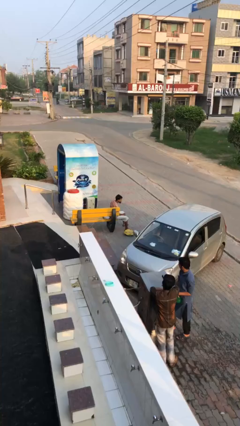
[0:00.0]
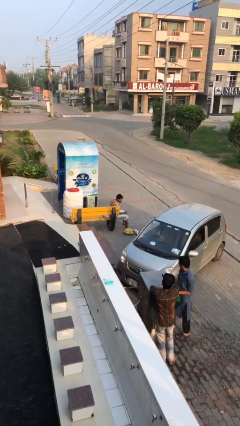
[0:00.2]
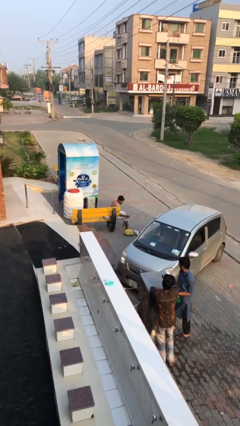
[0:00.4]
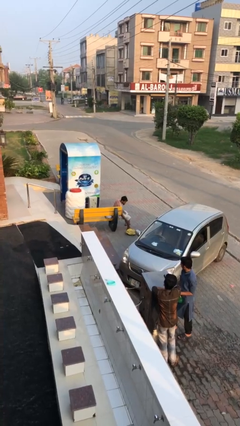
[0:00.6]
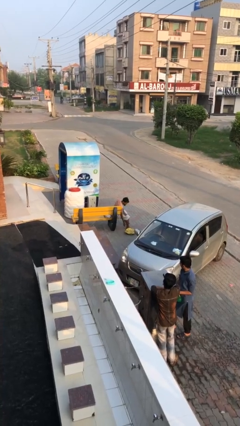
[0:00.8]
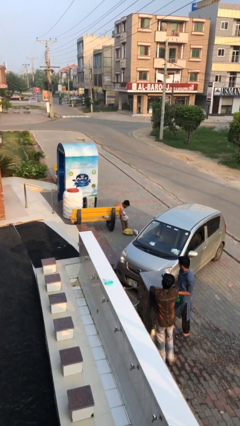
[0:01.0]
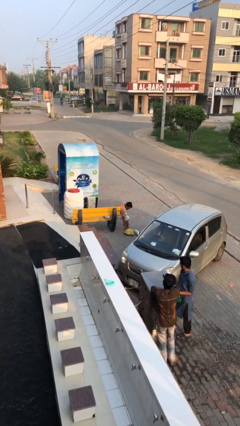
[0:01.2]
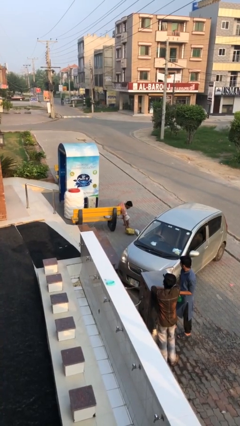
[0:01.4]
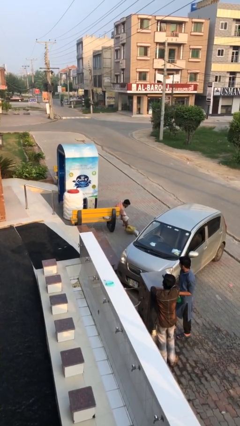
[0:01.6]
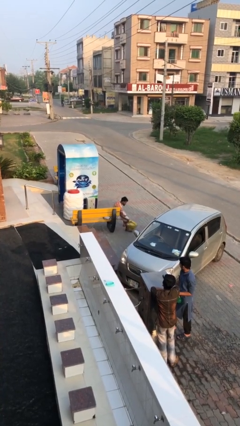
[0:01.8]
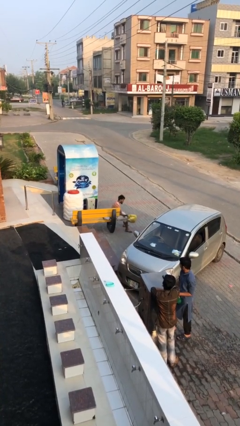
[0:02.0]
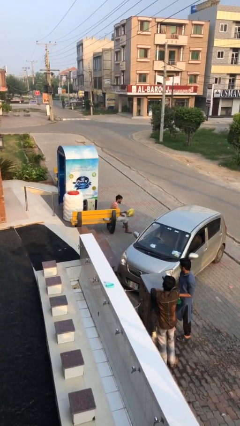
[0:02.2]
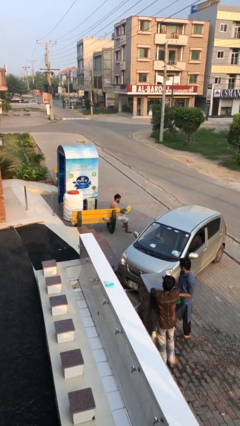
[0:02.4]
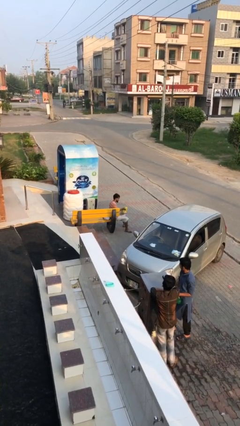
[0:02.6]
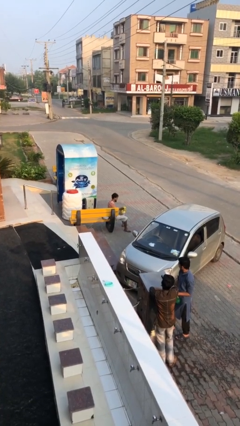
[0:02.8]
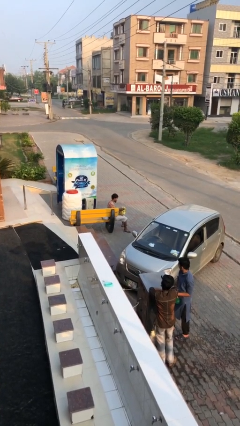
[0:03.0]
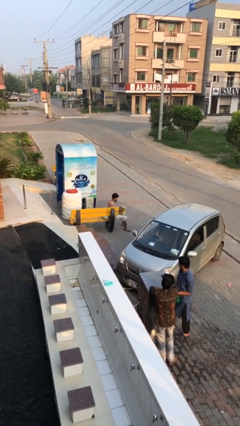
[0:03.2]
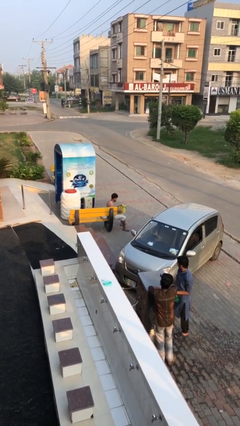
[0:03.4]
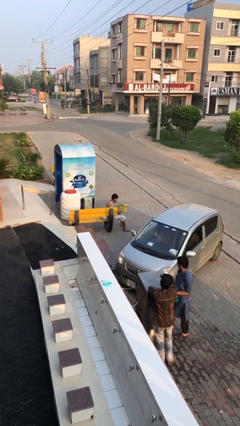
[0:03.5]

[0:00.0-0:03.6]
person picks up object from floor

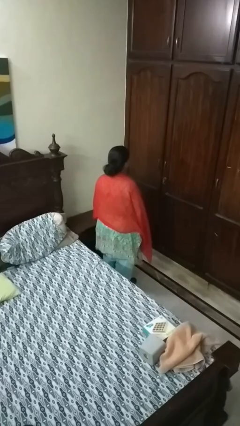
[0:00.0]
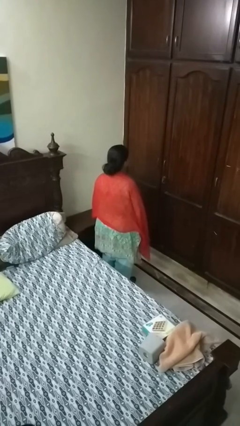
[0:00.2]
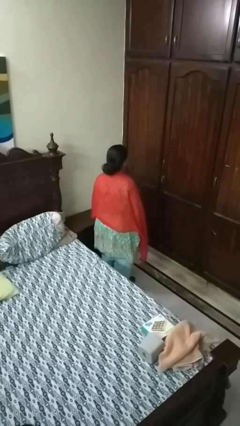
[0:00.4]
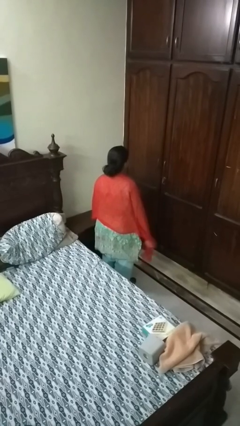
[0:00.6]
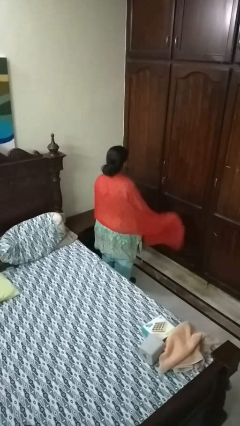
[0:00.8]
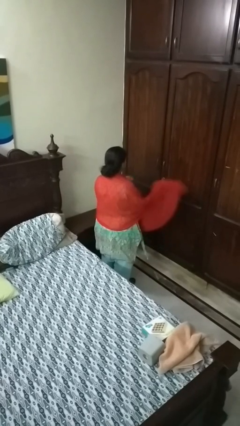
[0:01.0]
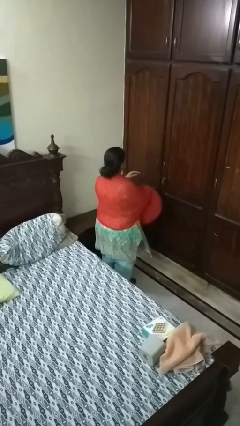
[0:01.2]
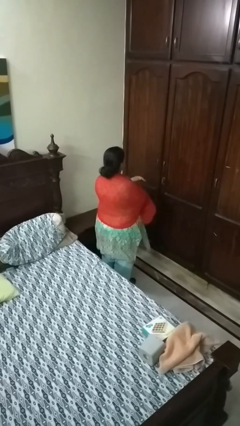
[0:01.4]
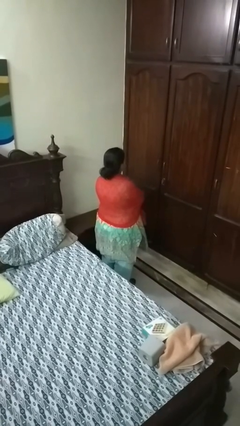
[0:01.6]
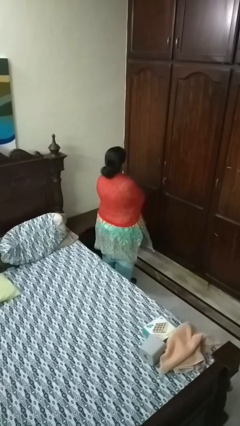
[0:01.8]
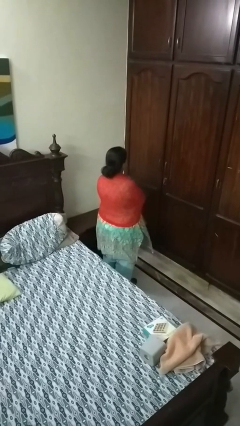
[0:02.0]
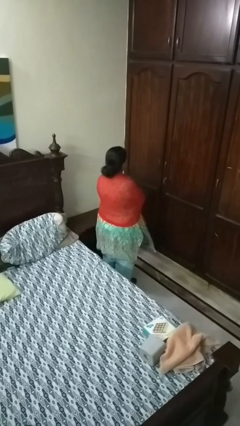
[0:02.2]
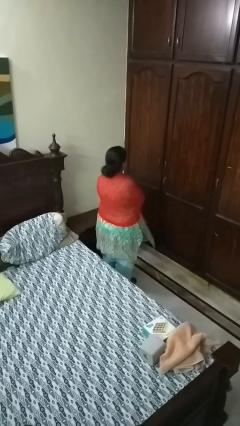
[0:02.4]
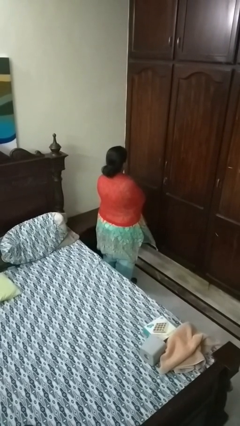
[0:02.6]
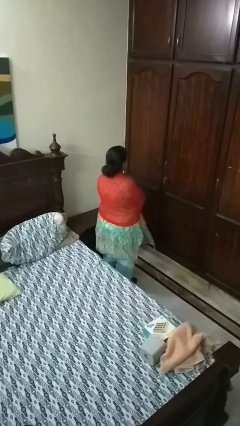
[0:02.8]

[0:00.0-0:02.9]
person crosses arms

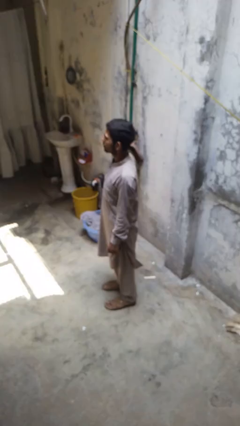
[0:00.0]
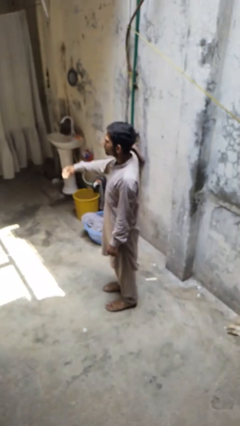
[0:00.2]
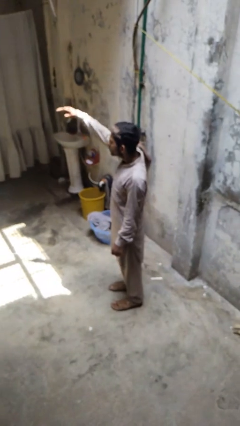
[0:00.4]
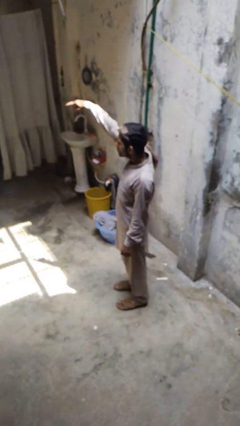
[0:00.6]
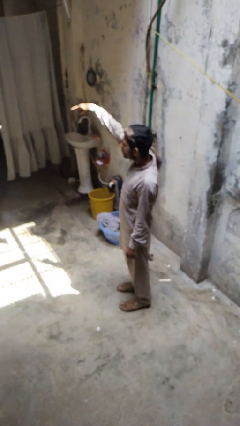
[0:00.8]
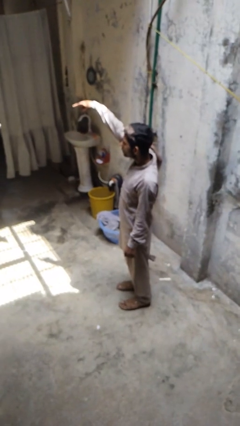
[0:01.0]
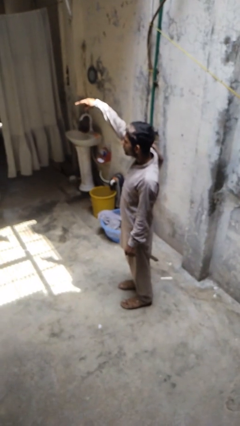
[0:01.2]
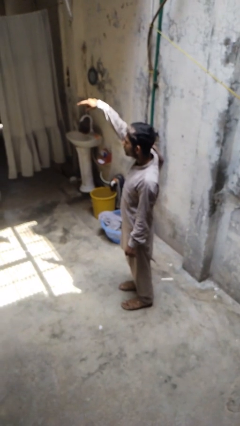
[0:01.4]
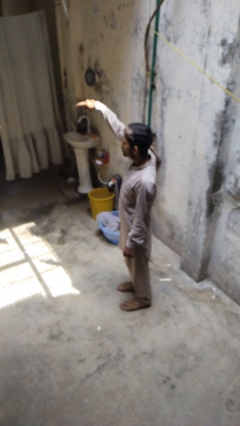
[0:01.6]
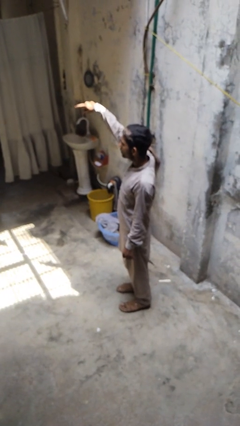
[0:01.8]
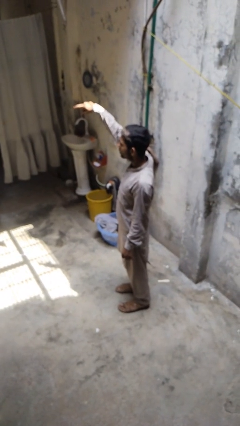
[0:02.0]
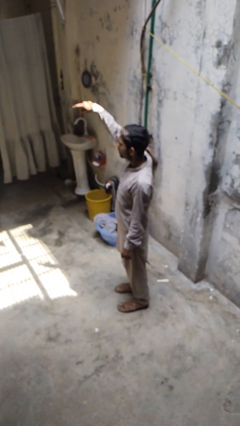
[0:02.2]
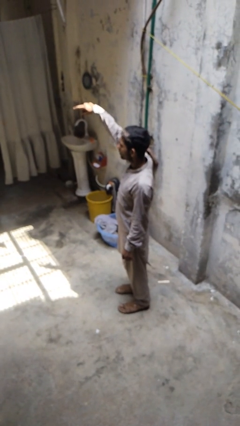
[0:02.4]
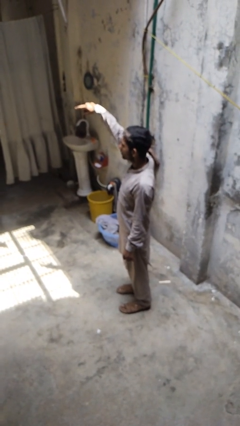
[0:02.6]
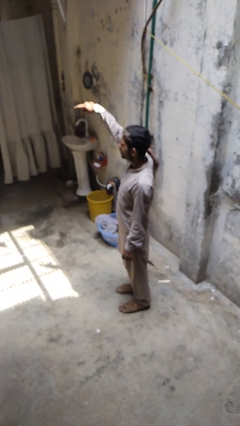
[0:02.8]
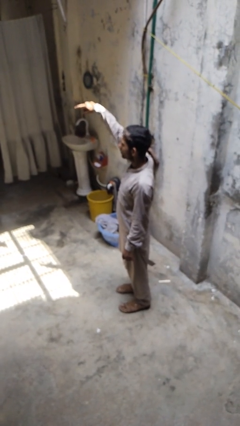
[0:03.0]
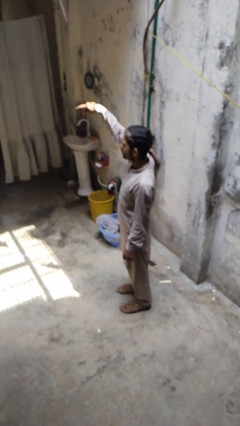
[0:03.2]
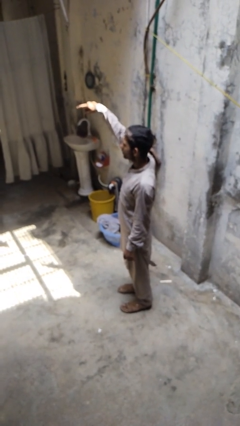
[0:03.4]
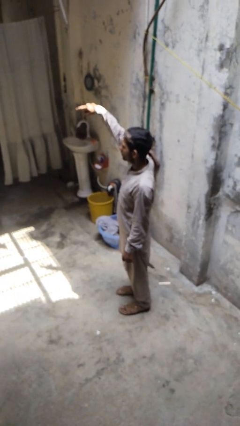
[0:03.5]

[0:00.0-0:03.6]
person points at person

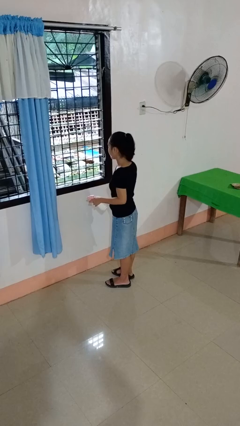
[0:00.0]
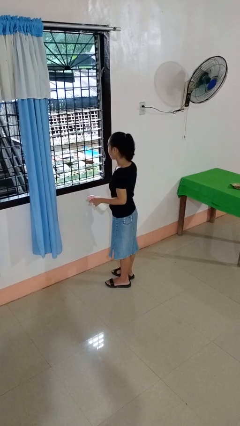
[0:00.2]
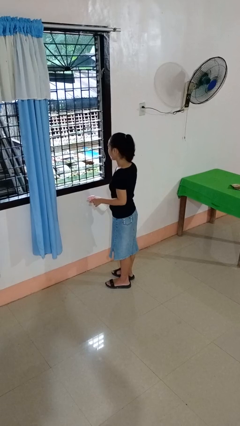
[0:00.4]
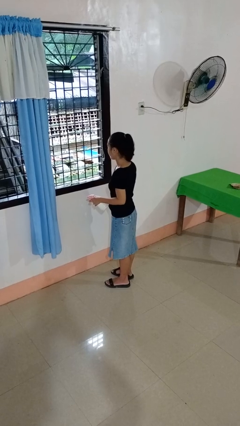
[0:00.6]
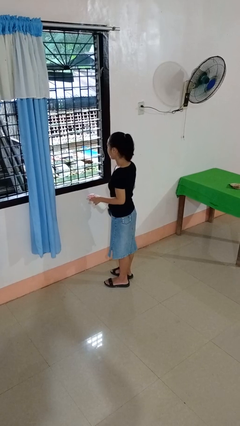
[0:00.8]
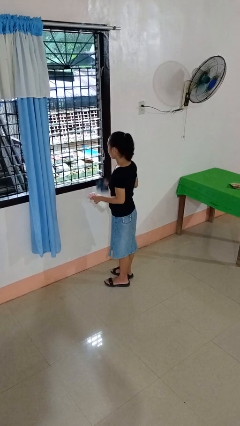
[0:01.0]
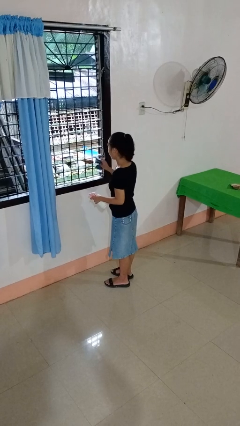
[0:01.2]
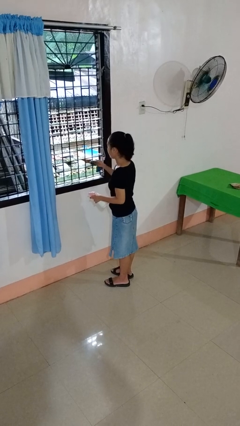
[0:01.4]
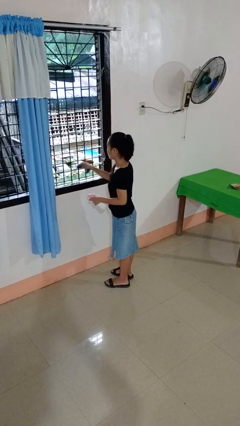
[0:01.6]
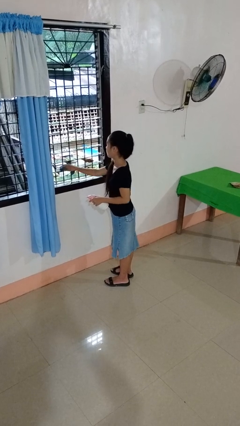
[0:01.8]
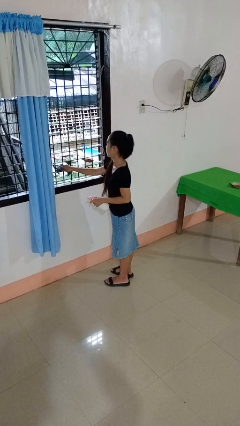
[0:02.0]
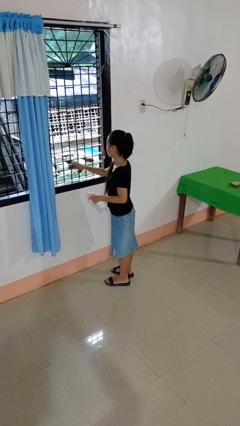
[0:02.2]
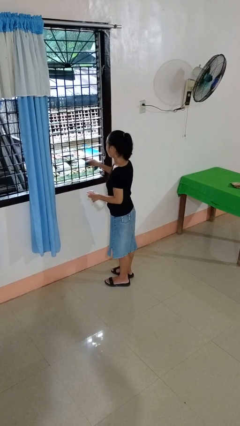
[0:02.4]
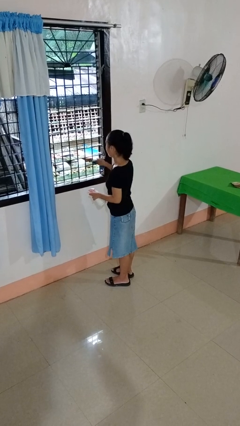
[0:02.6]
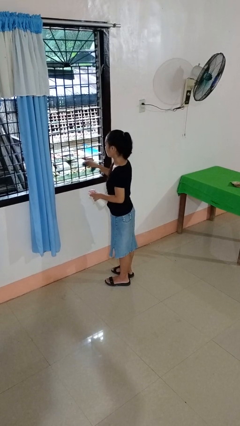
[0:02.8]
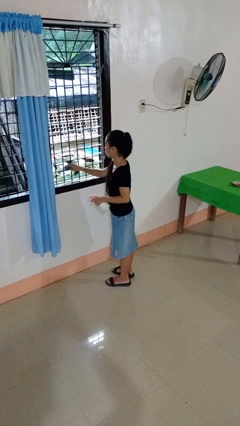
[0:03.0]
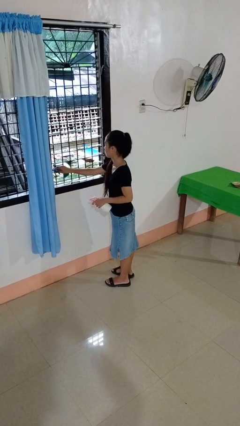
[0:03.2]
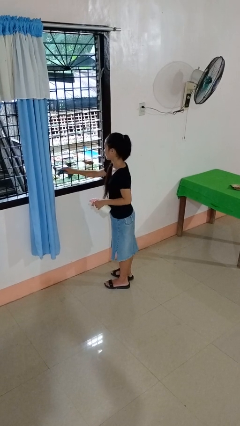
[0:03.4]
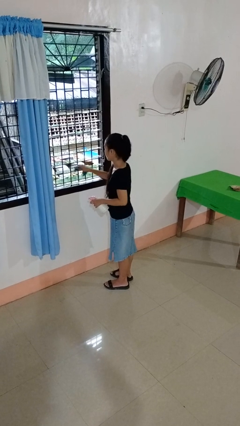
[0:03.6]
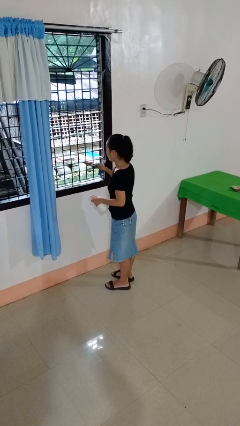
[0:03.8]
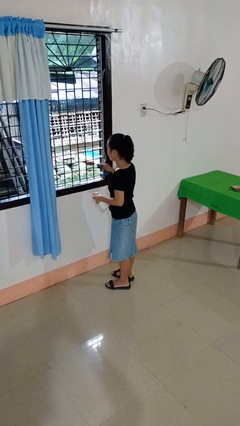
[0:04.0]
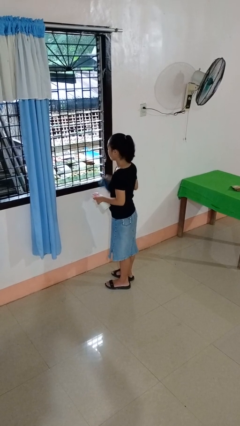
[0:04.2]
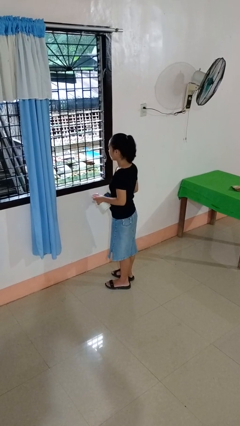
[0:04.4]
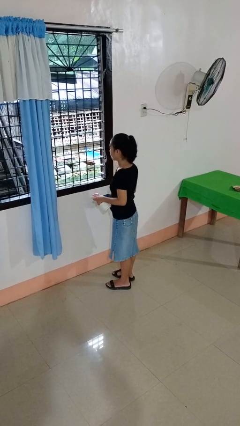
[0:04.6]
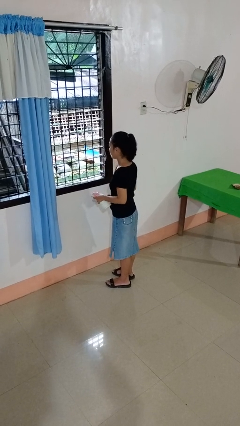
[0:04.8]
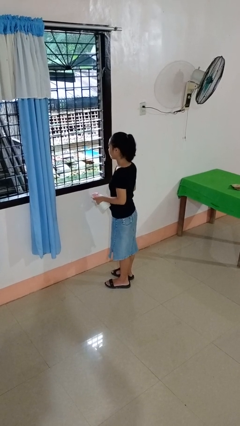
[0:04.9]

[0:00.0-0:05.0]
person washes window

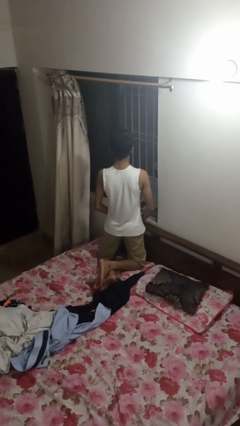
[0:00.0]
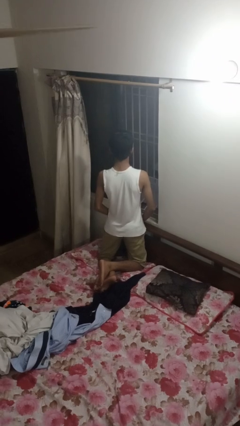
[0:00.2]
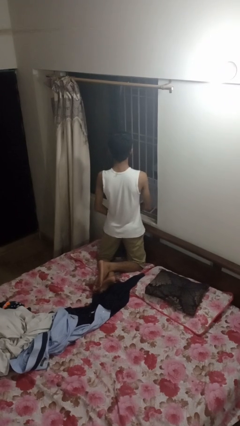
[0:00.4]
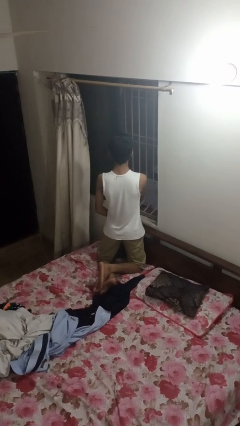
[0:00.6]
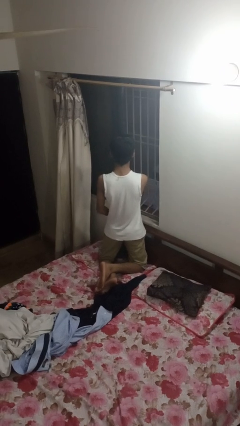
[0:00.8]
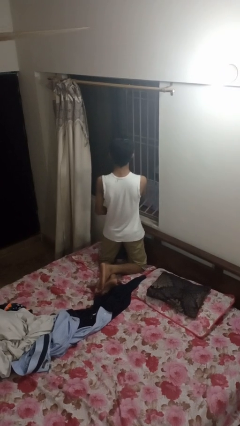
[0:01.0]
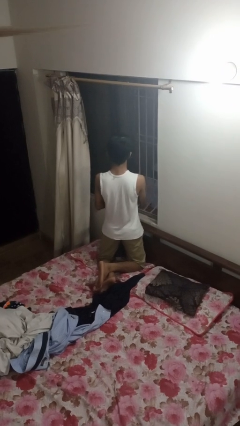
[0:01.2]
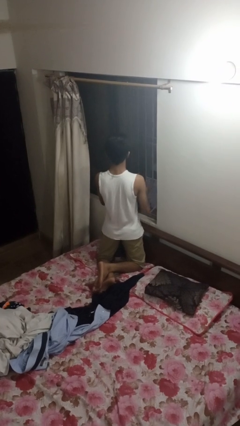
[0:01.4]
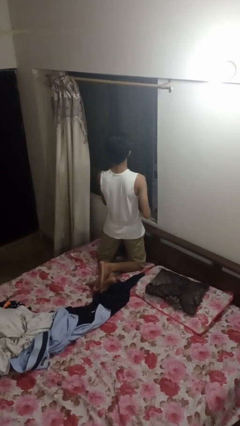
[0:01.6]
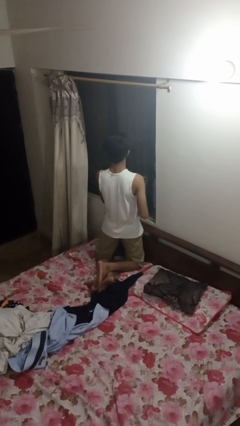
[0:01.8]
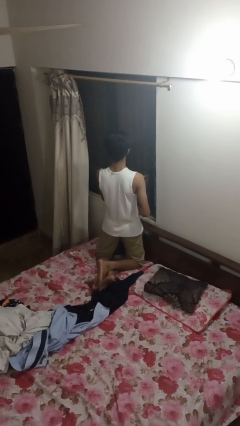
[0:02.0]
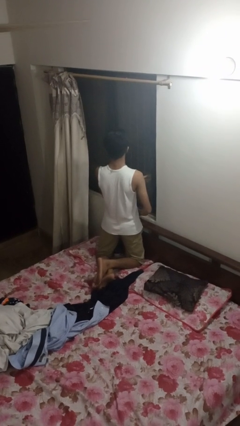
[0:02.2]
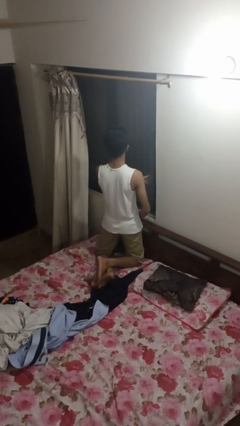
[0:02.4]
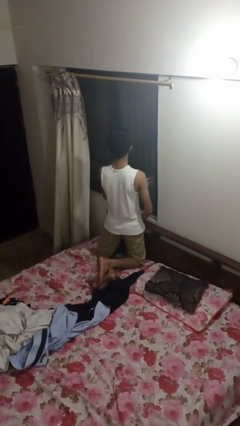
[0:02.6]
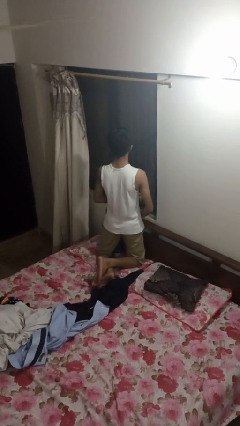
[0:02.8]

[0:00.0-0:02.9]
person closes home window
